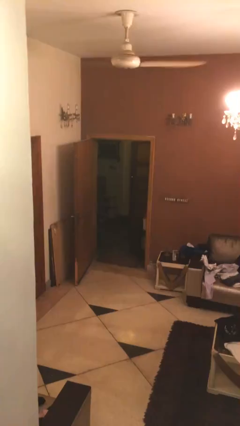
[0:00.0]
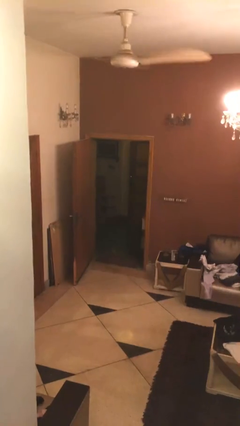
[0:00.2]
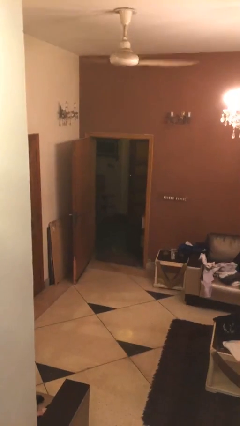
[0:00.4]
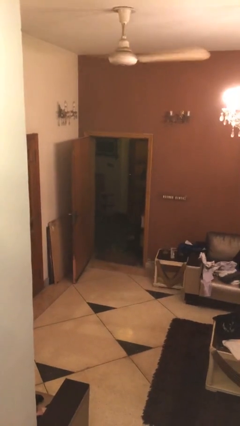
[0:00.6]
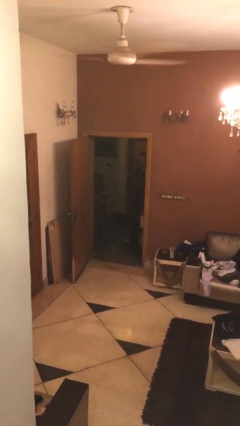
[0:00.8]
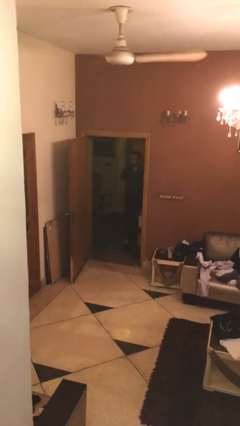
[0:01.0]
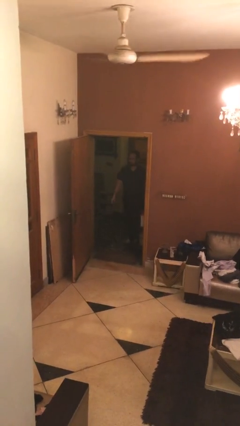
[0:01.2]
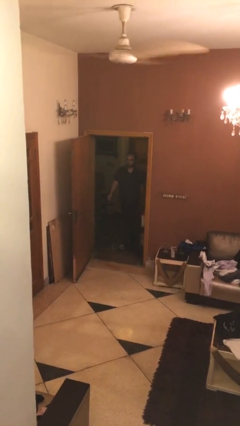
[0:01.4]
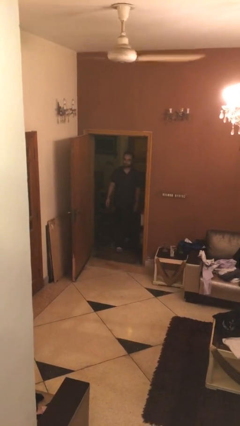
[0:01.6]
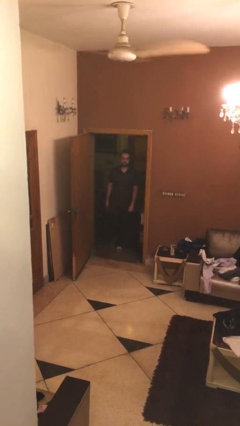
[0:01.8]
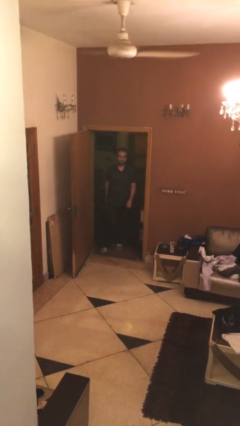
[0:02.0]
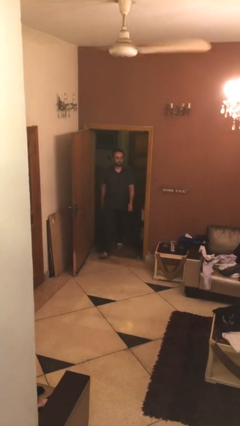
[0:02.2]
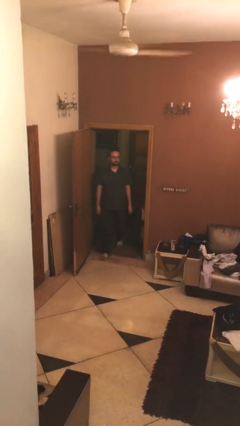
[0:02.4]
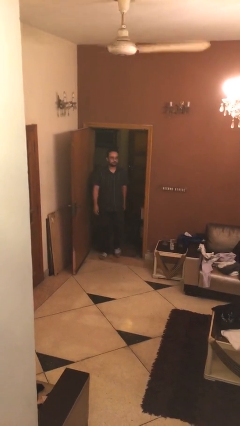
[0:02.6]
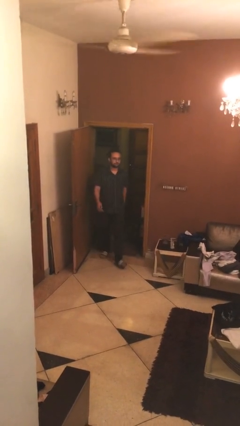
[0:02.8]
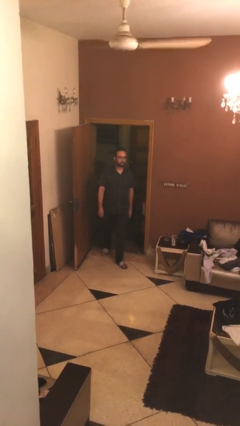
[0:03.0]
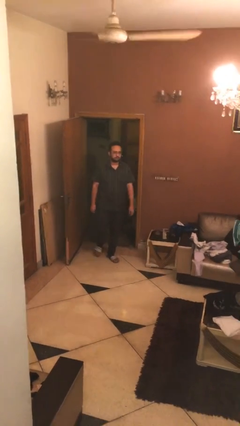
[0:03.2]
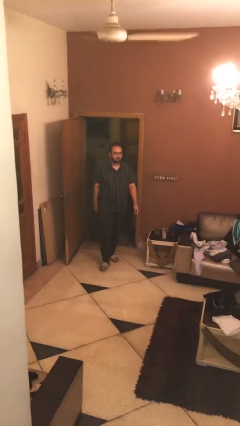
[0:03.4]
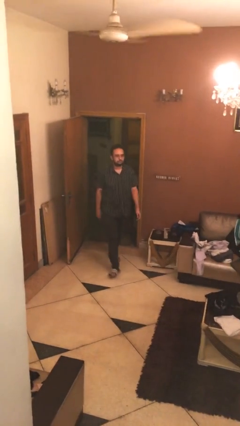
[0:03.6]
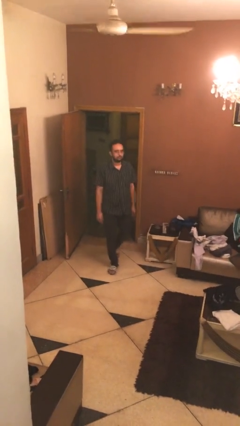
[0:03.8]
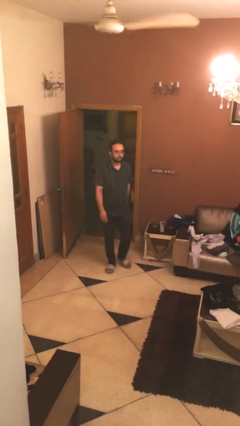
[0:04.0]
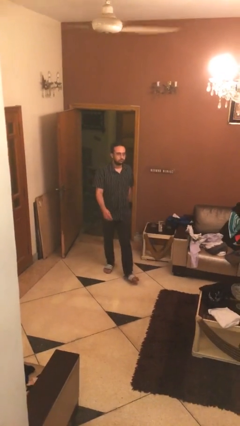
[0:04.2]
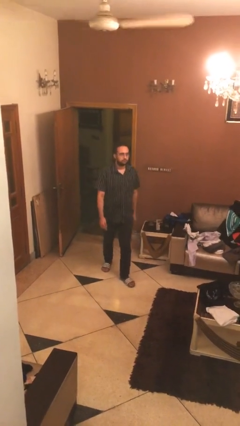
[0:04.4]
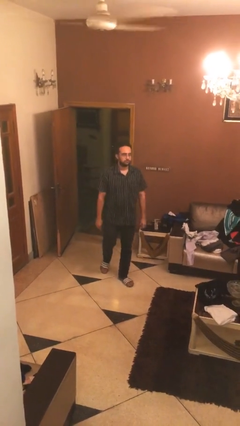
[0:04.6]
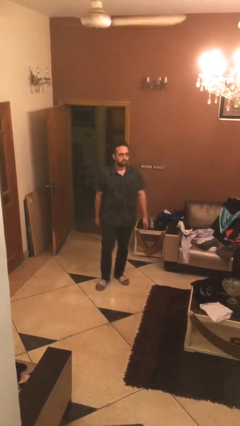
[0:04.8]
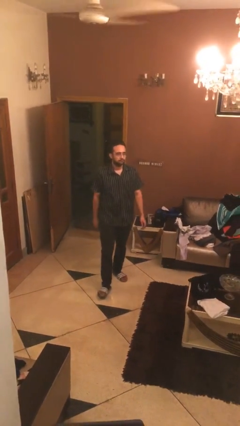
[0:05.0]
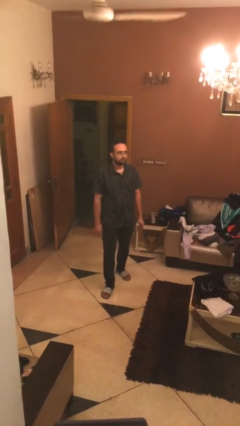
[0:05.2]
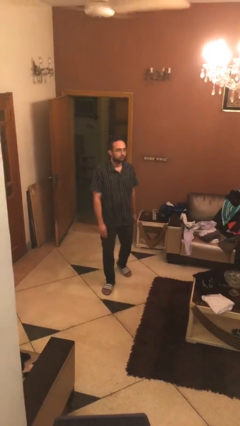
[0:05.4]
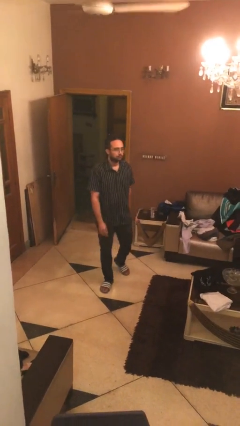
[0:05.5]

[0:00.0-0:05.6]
person enters scene through structure

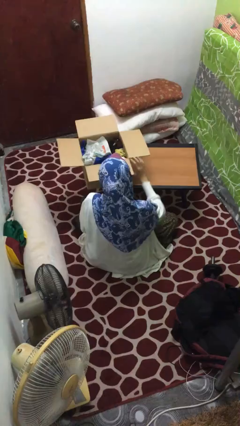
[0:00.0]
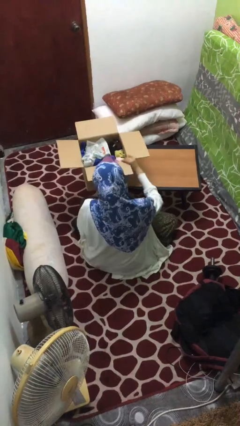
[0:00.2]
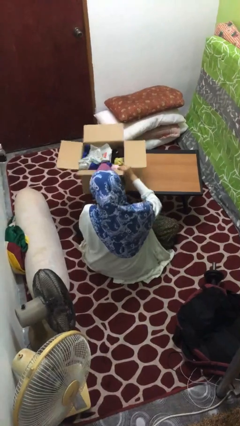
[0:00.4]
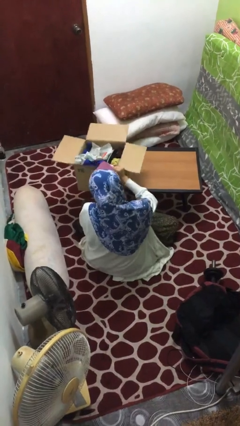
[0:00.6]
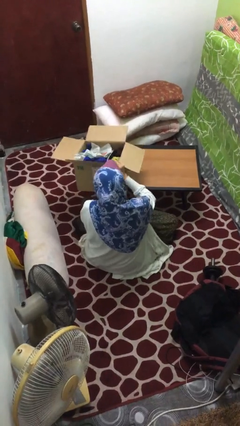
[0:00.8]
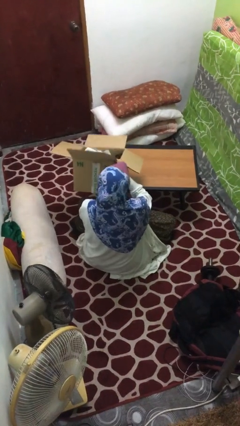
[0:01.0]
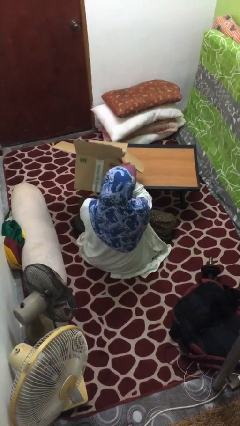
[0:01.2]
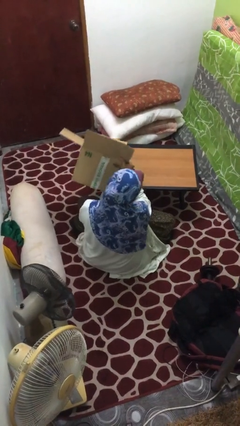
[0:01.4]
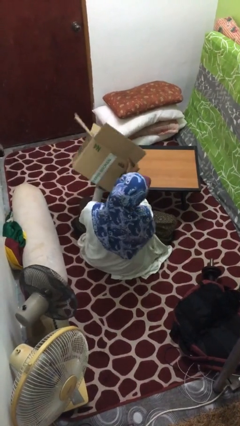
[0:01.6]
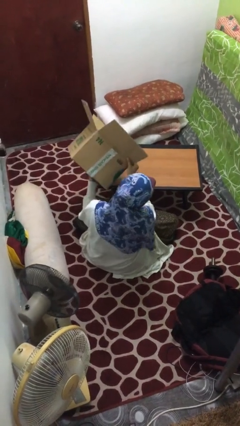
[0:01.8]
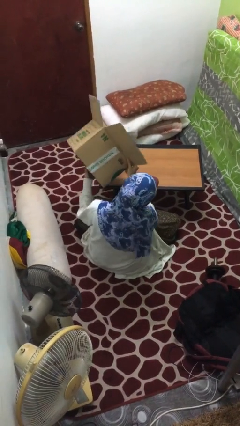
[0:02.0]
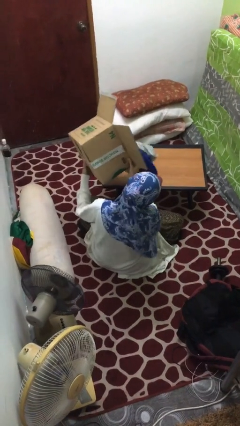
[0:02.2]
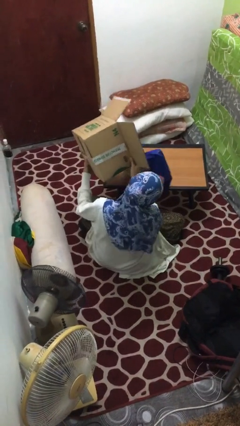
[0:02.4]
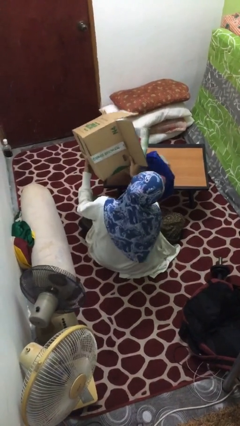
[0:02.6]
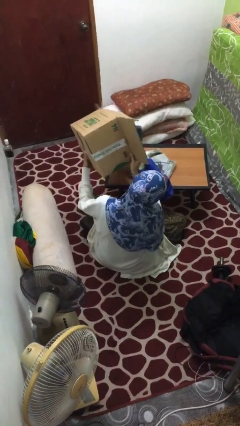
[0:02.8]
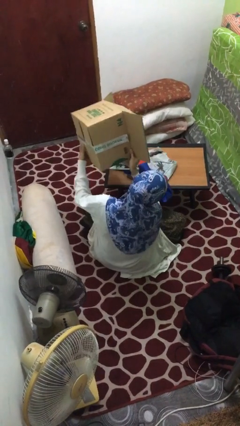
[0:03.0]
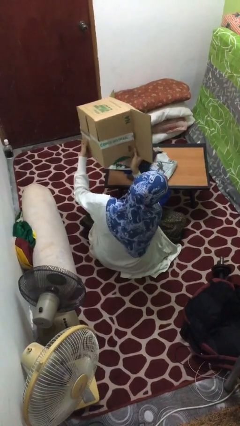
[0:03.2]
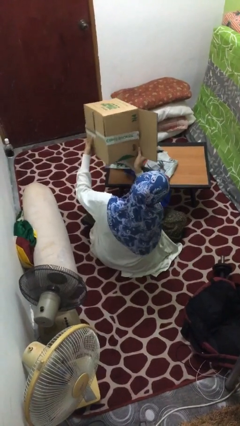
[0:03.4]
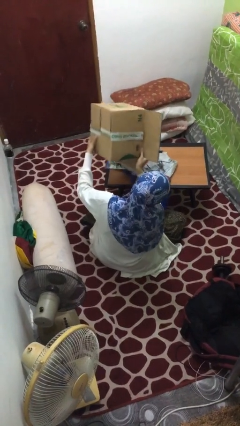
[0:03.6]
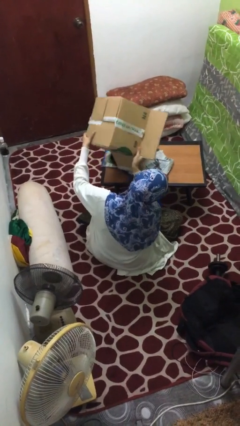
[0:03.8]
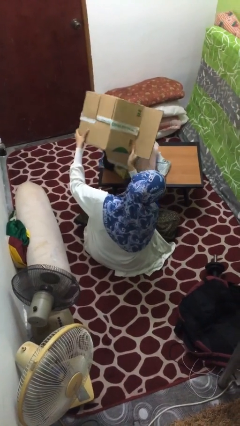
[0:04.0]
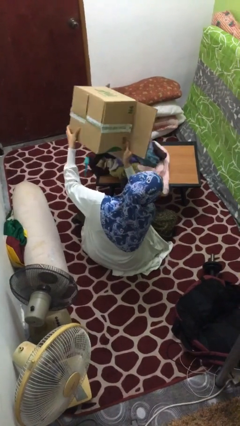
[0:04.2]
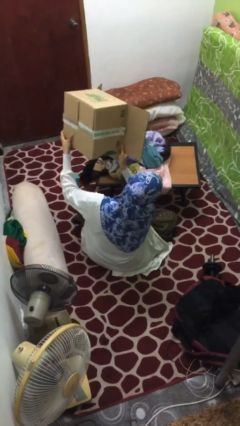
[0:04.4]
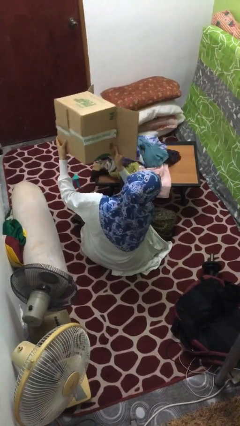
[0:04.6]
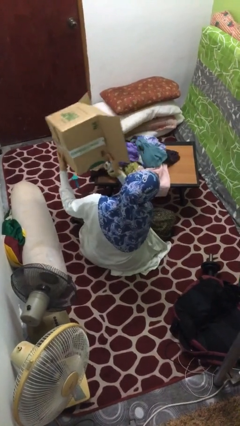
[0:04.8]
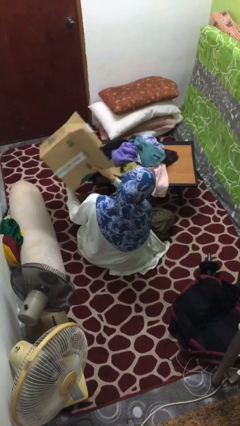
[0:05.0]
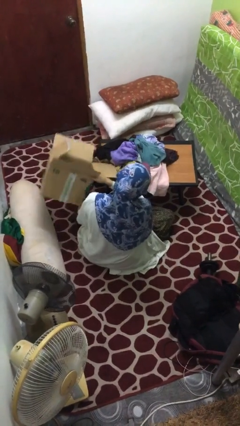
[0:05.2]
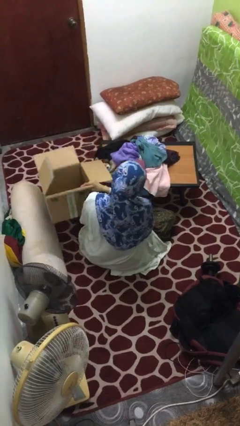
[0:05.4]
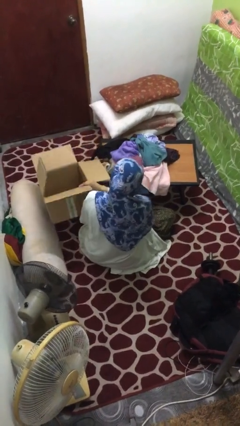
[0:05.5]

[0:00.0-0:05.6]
person unloads box onto table

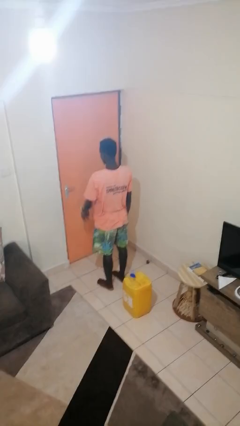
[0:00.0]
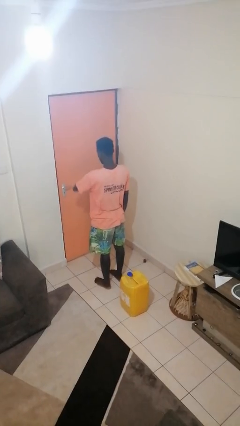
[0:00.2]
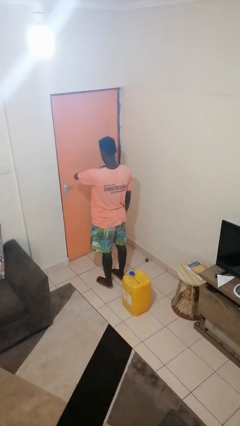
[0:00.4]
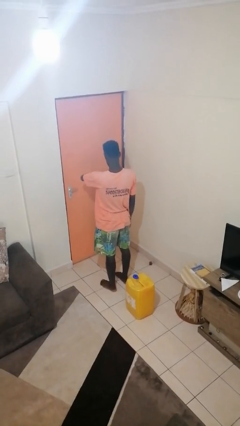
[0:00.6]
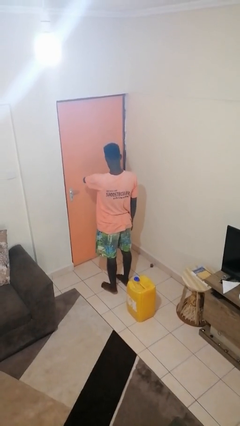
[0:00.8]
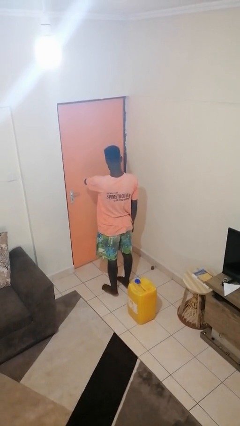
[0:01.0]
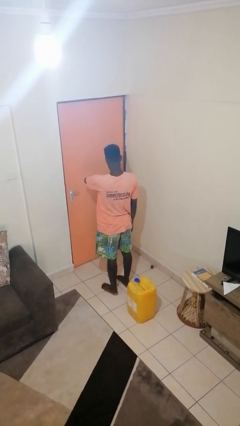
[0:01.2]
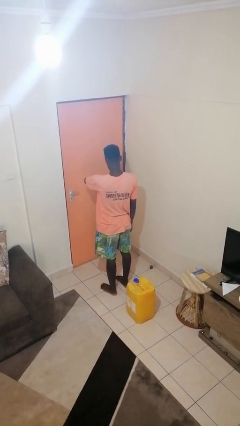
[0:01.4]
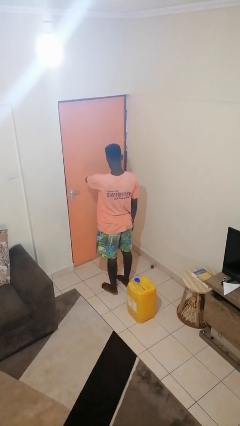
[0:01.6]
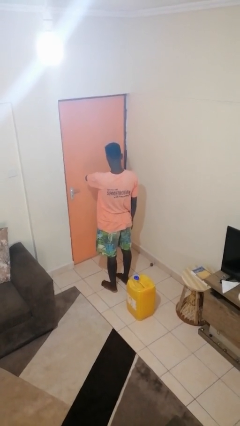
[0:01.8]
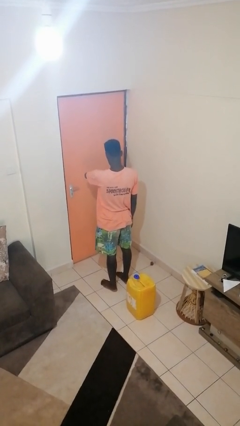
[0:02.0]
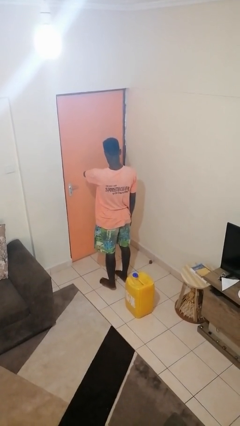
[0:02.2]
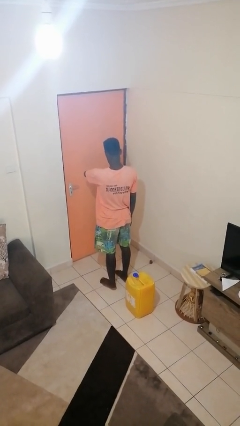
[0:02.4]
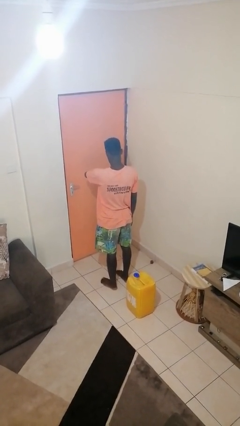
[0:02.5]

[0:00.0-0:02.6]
person looks at wristwatch

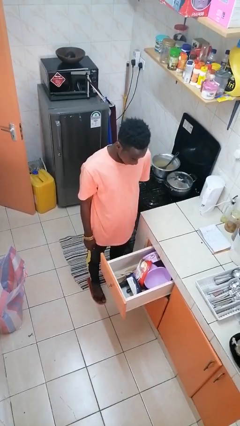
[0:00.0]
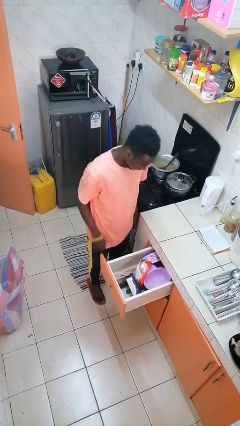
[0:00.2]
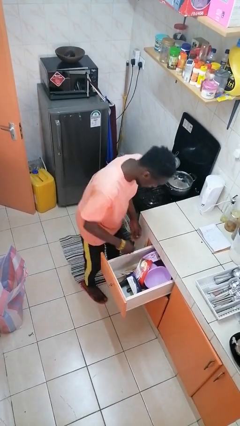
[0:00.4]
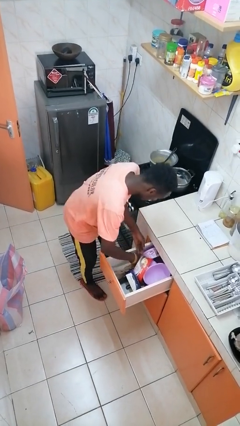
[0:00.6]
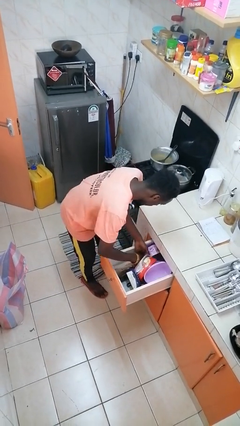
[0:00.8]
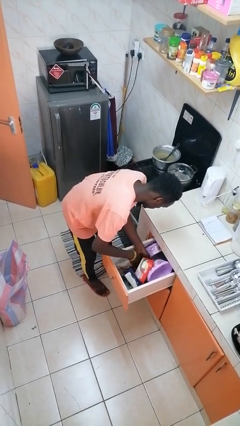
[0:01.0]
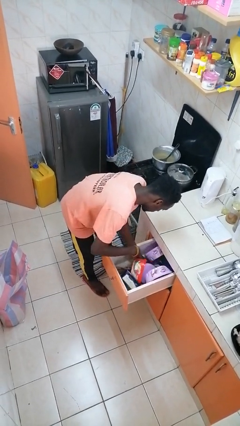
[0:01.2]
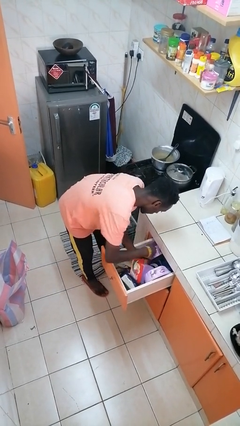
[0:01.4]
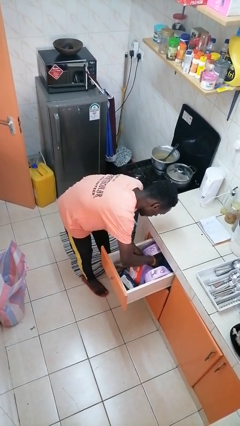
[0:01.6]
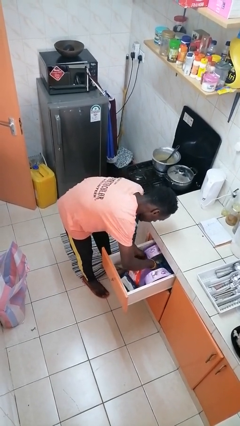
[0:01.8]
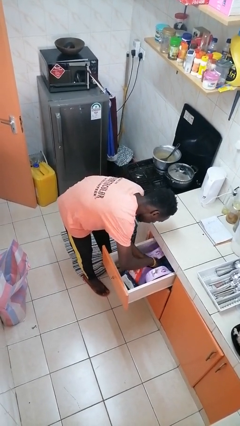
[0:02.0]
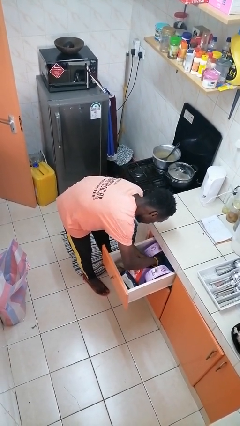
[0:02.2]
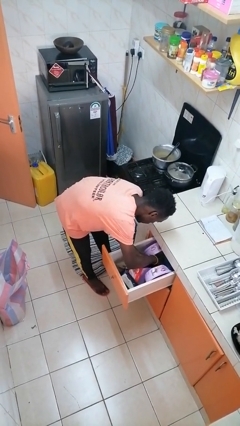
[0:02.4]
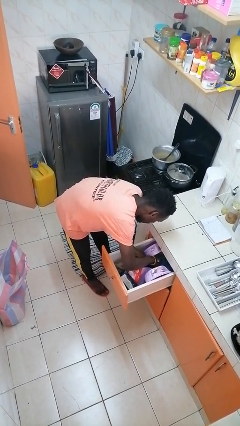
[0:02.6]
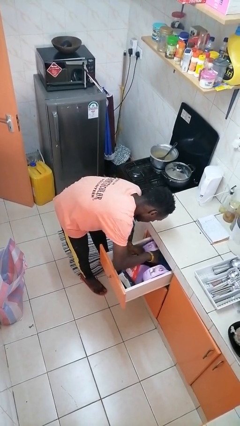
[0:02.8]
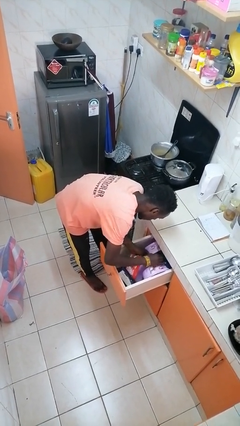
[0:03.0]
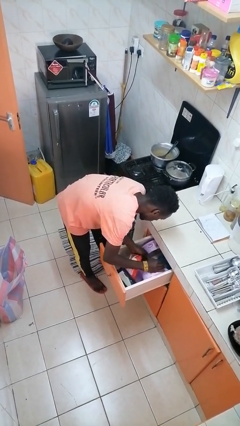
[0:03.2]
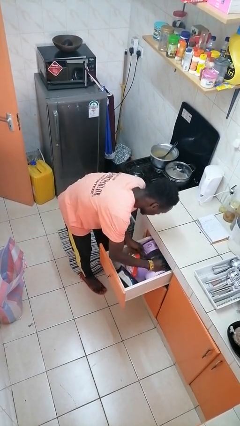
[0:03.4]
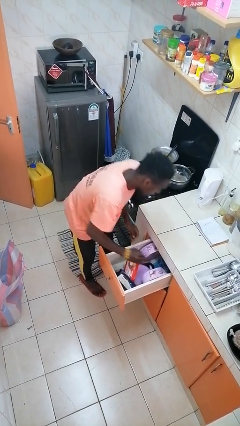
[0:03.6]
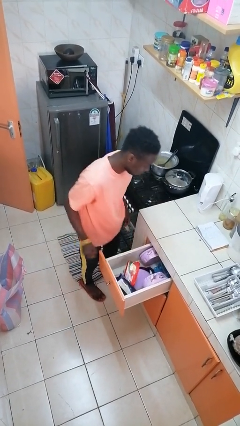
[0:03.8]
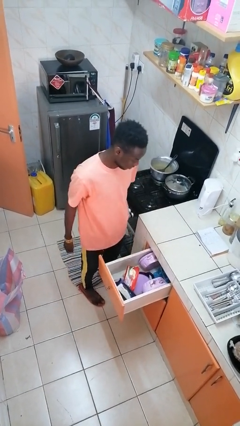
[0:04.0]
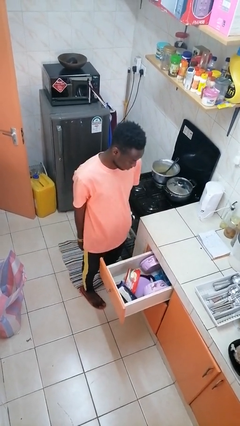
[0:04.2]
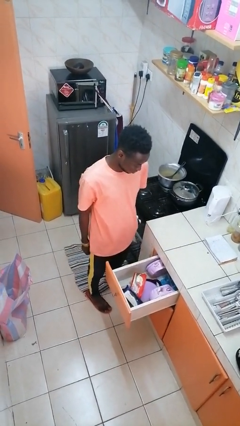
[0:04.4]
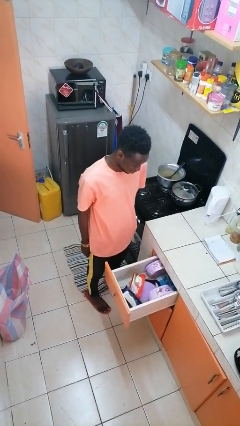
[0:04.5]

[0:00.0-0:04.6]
person searches in kitchen drawer
